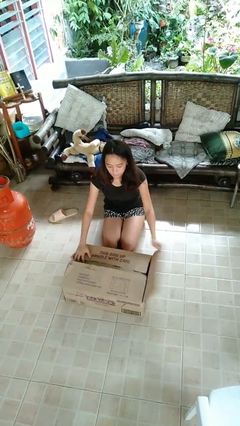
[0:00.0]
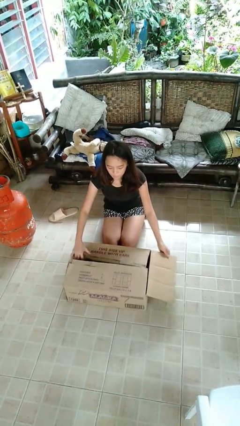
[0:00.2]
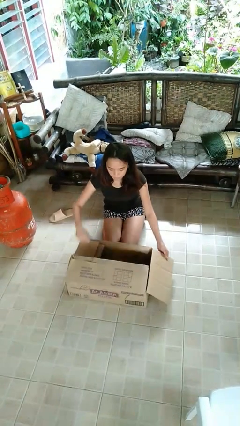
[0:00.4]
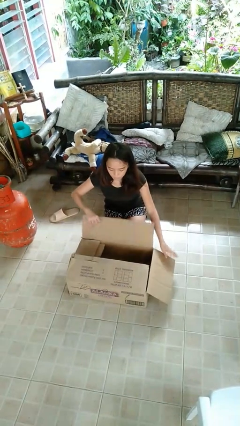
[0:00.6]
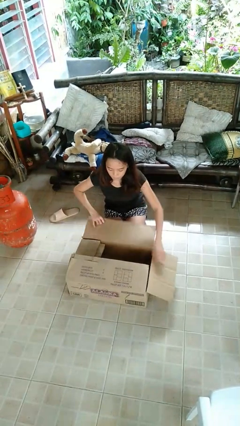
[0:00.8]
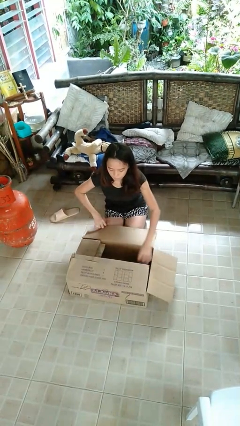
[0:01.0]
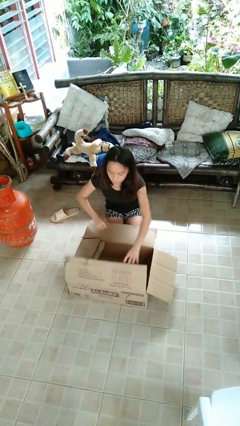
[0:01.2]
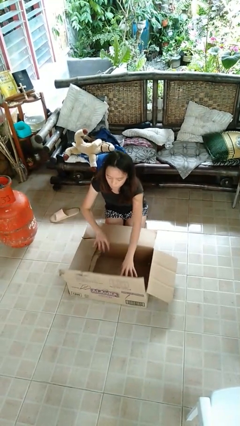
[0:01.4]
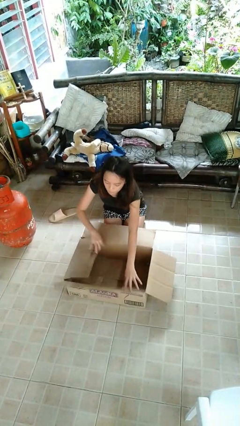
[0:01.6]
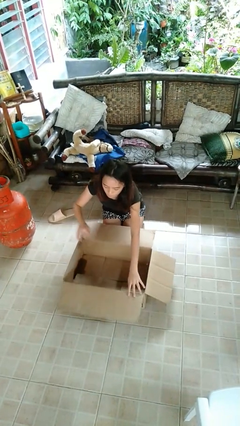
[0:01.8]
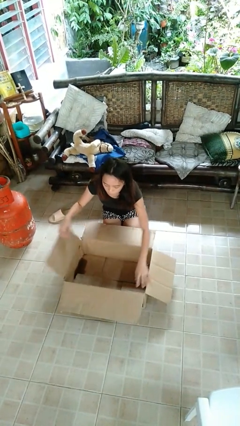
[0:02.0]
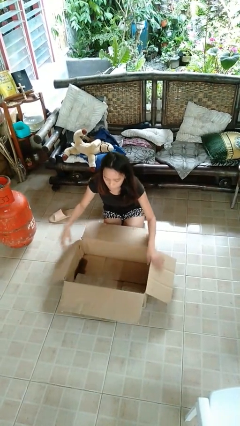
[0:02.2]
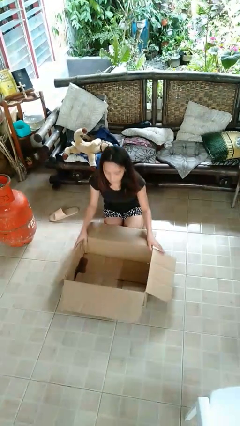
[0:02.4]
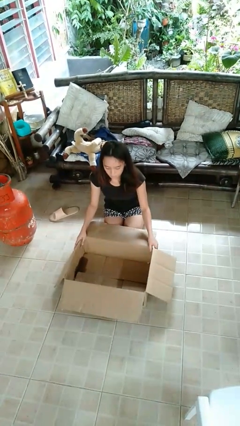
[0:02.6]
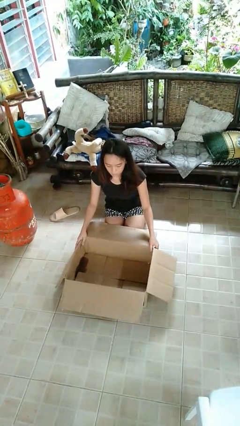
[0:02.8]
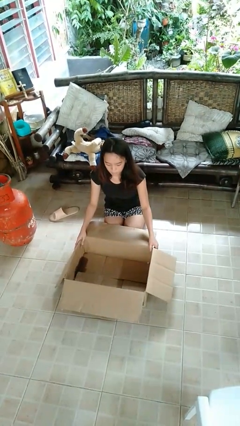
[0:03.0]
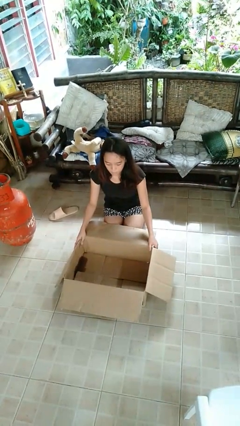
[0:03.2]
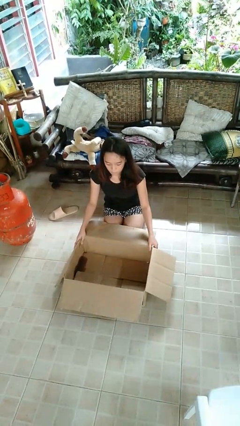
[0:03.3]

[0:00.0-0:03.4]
person opens box

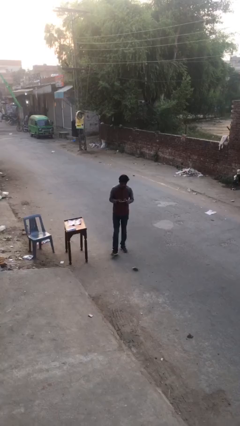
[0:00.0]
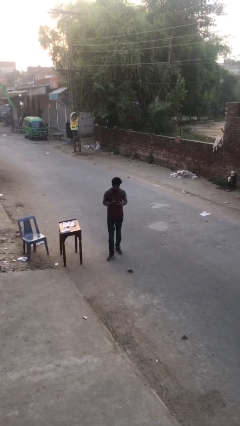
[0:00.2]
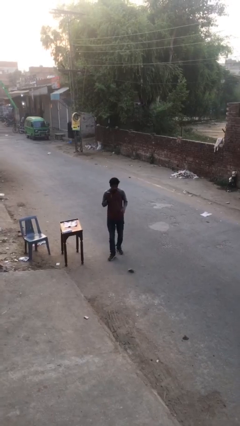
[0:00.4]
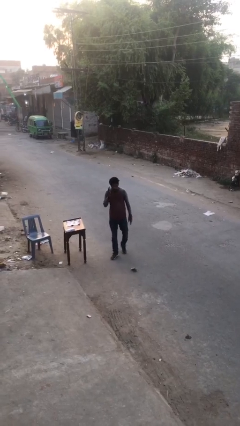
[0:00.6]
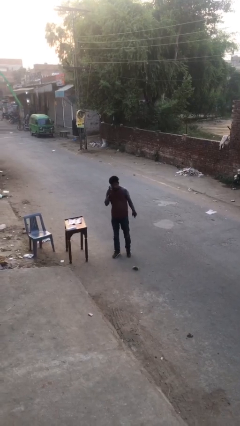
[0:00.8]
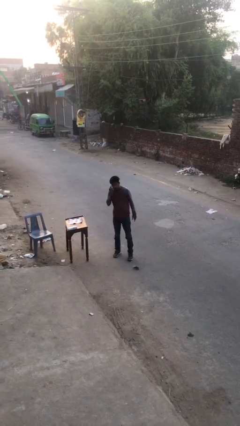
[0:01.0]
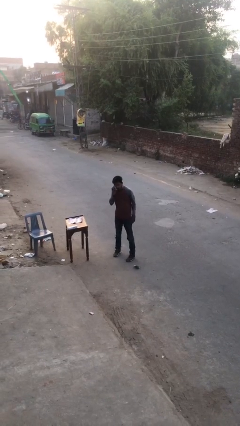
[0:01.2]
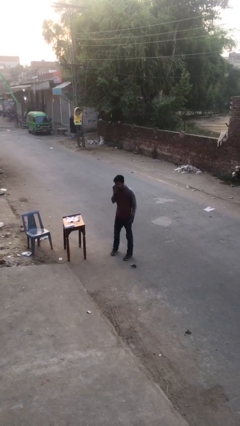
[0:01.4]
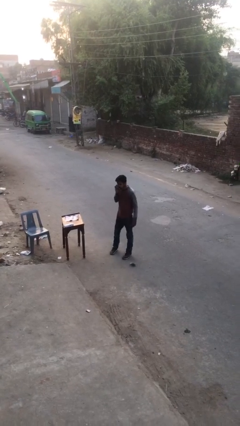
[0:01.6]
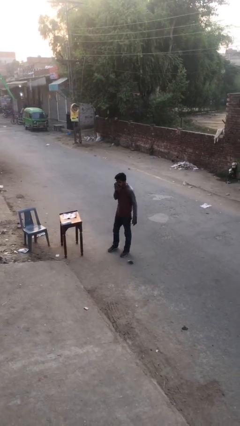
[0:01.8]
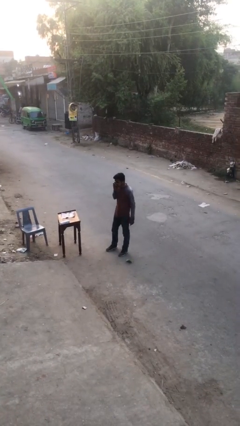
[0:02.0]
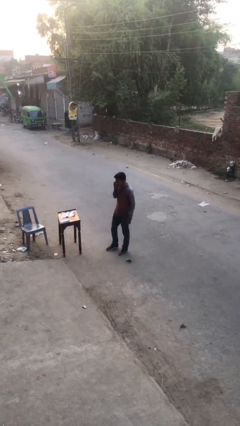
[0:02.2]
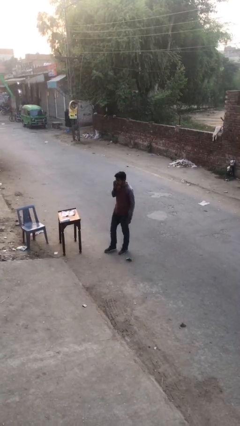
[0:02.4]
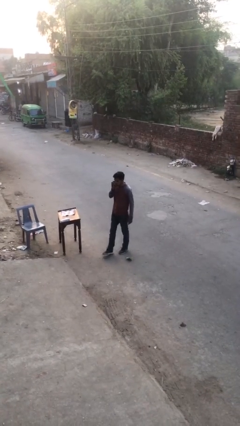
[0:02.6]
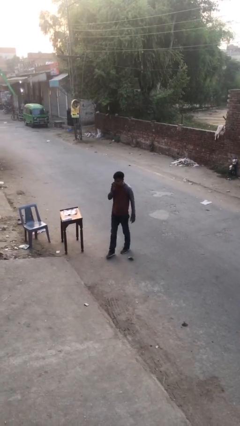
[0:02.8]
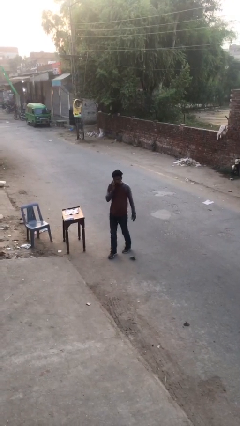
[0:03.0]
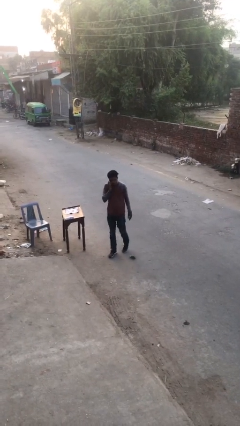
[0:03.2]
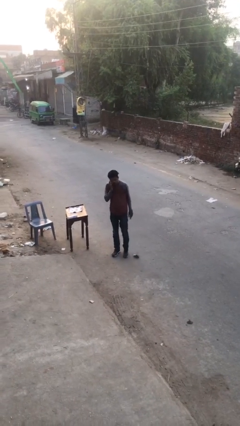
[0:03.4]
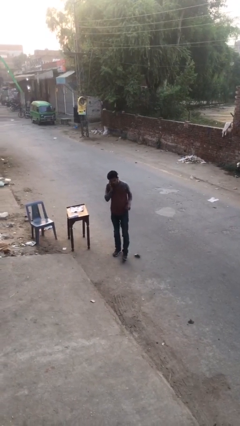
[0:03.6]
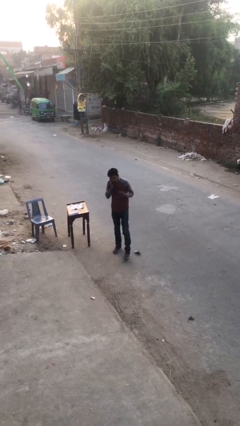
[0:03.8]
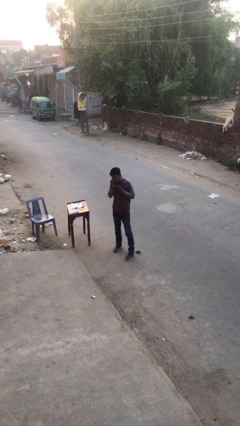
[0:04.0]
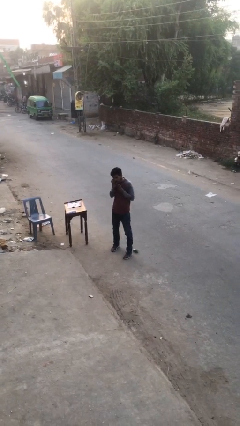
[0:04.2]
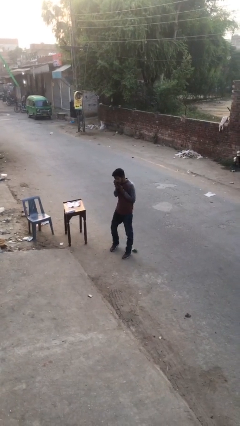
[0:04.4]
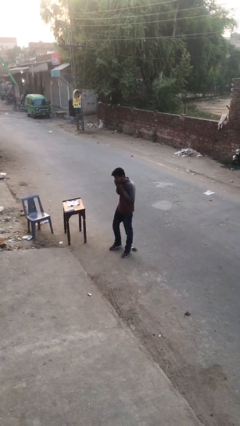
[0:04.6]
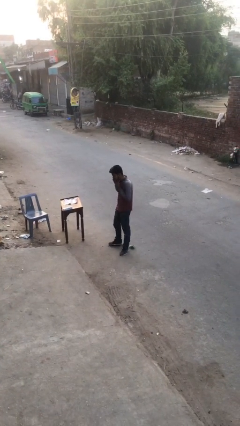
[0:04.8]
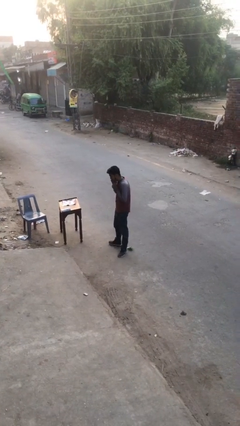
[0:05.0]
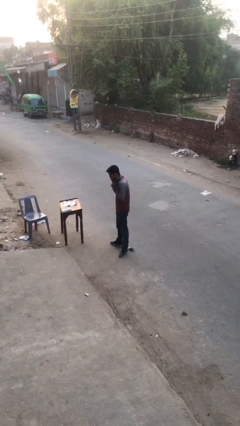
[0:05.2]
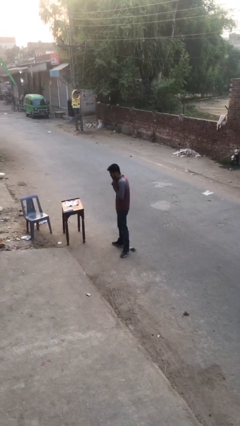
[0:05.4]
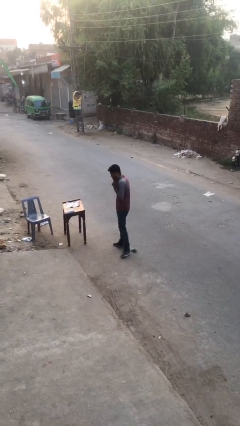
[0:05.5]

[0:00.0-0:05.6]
person talks on phone

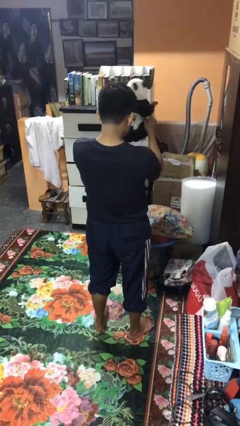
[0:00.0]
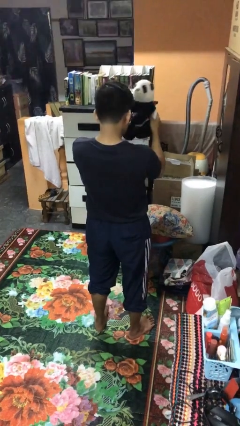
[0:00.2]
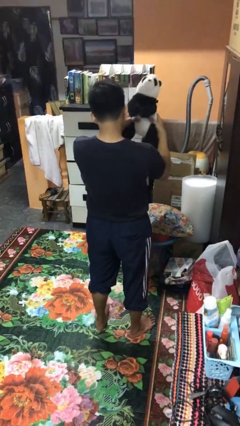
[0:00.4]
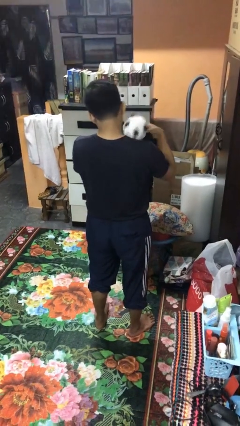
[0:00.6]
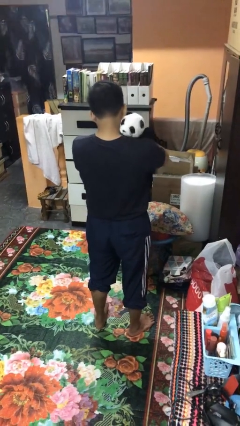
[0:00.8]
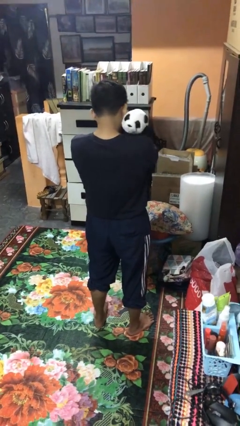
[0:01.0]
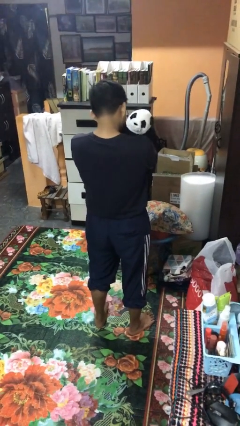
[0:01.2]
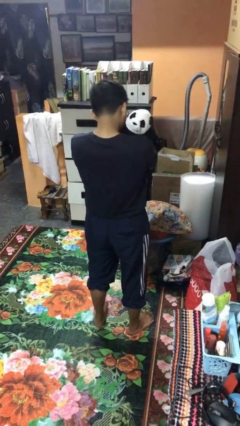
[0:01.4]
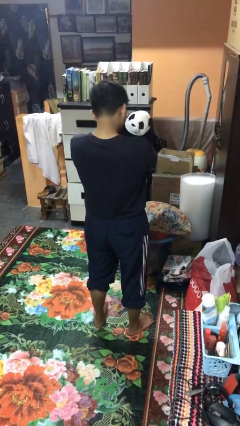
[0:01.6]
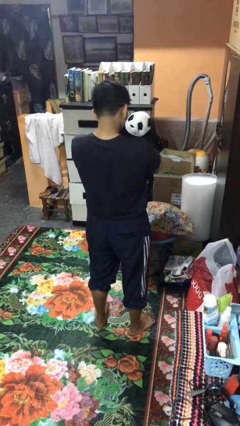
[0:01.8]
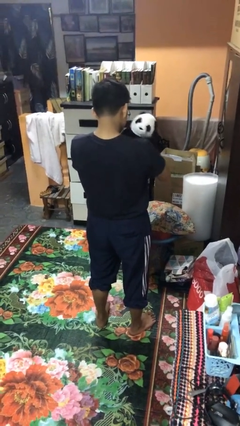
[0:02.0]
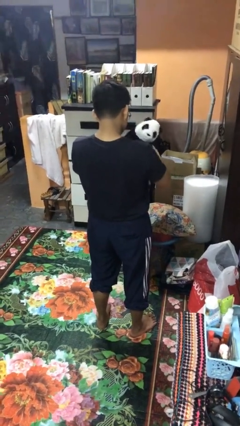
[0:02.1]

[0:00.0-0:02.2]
person hugs stuffed animal

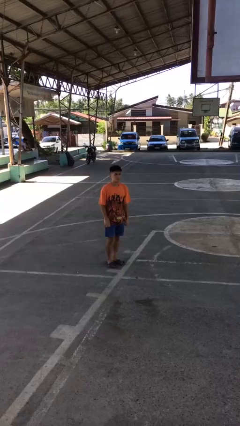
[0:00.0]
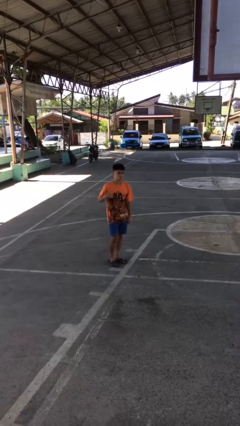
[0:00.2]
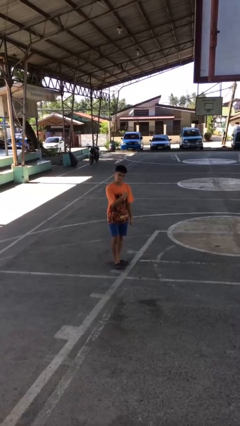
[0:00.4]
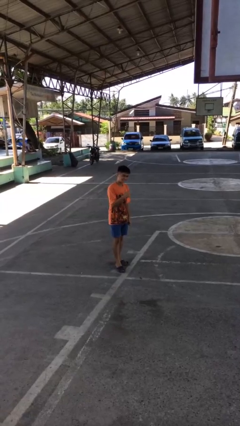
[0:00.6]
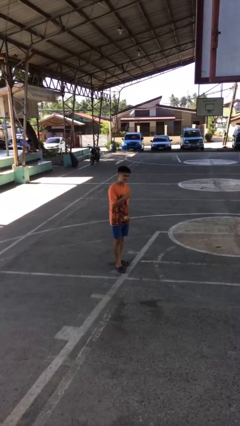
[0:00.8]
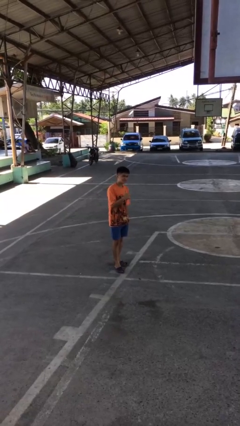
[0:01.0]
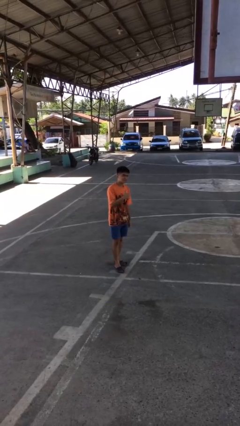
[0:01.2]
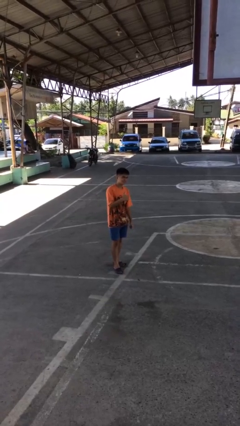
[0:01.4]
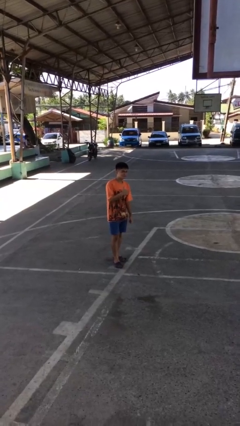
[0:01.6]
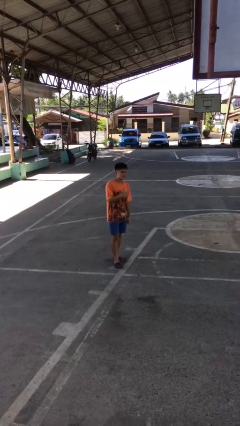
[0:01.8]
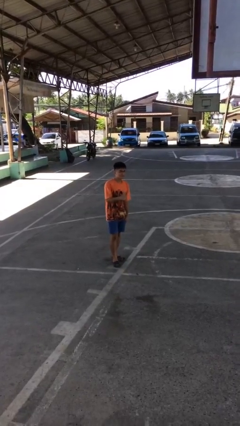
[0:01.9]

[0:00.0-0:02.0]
person gestures thumbs up

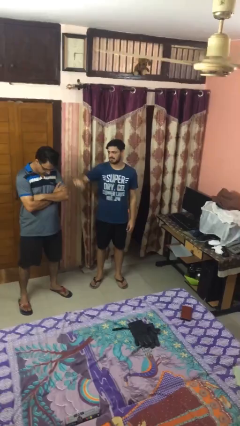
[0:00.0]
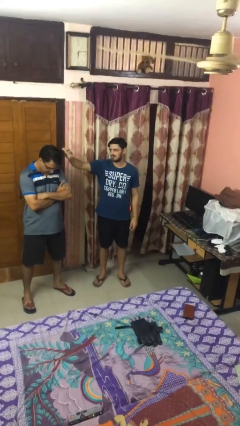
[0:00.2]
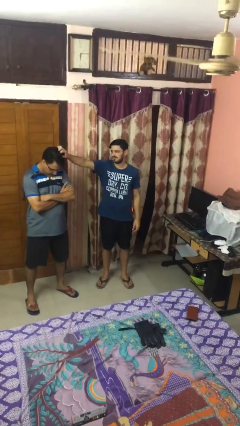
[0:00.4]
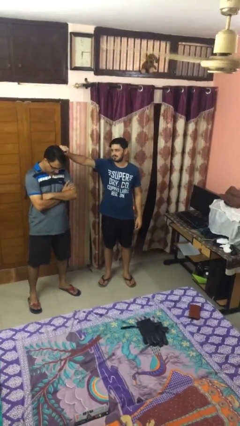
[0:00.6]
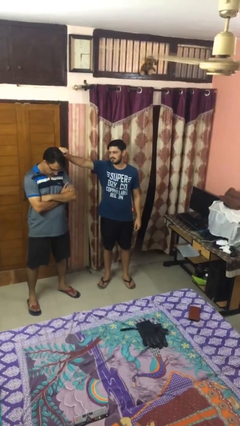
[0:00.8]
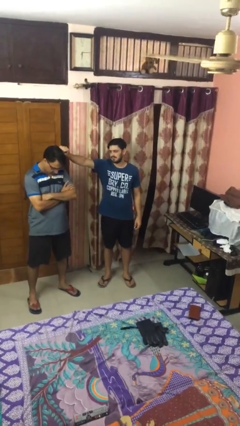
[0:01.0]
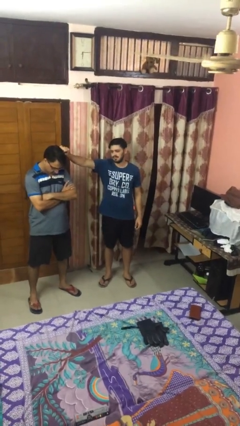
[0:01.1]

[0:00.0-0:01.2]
person grabs person by hair

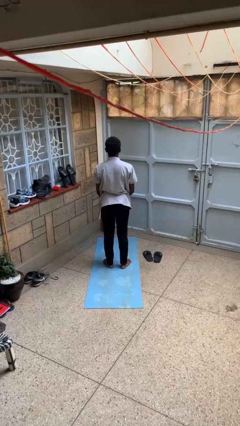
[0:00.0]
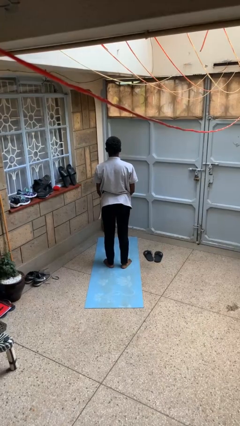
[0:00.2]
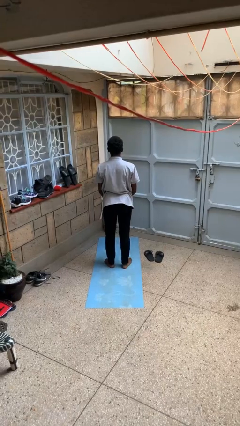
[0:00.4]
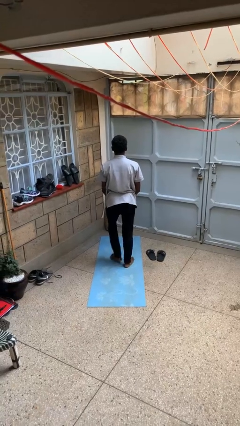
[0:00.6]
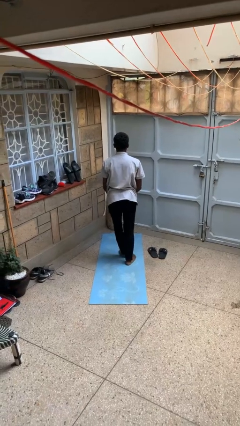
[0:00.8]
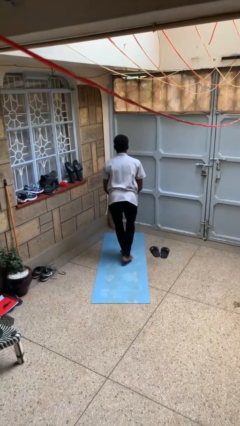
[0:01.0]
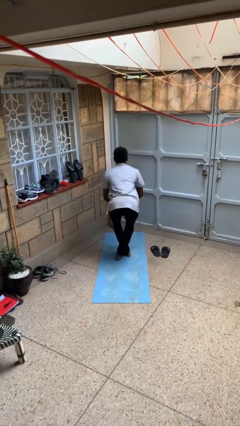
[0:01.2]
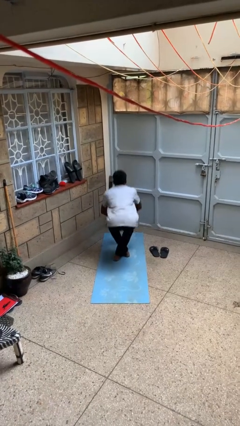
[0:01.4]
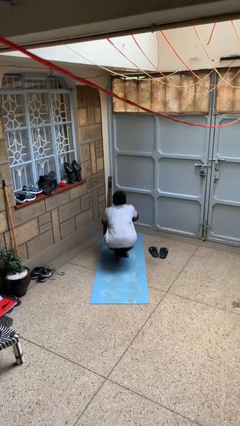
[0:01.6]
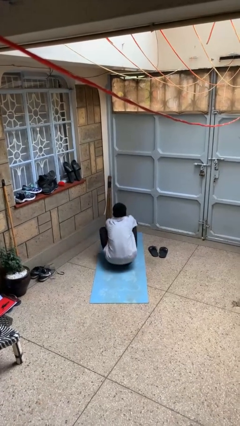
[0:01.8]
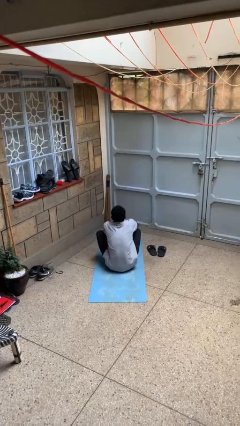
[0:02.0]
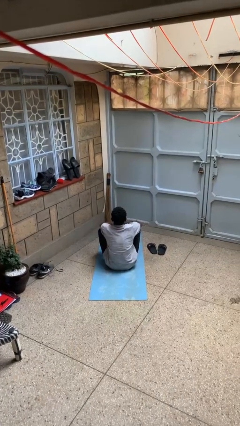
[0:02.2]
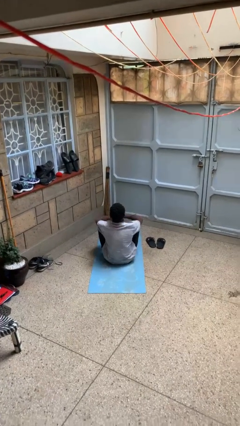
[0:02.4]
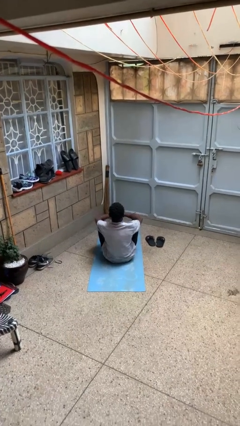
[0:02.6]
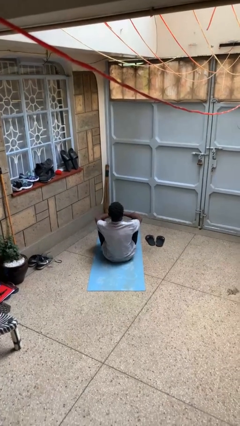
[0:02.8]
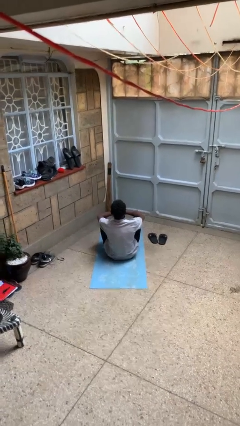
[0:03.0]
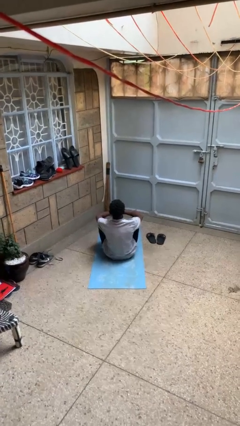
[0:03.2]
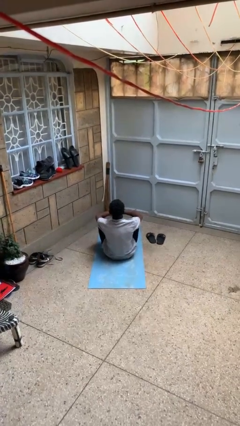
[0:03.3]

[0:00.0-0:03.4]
person sits crisscross
